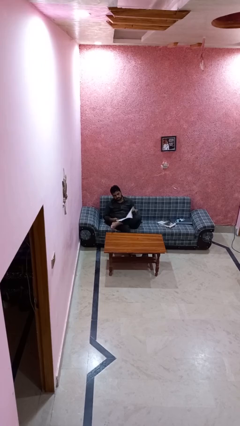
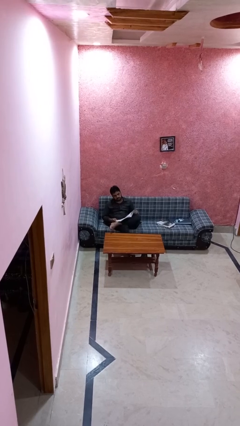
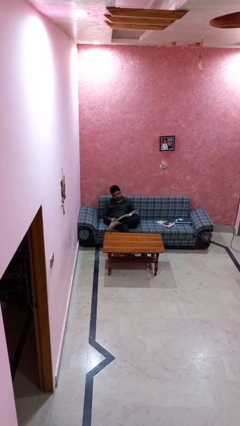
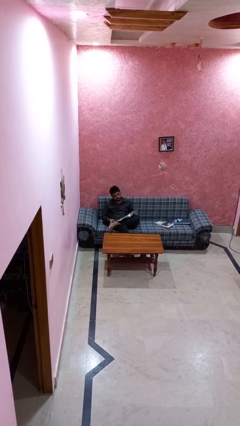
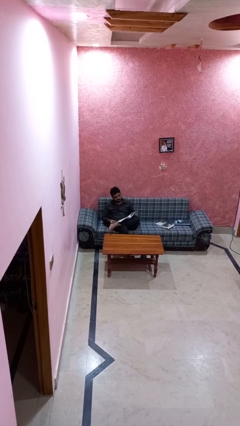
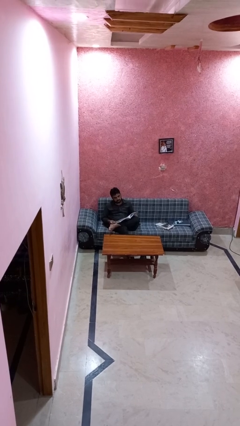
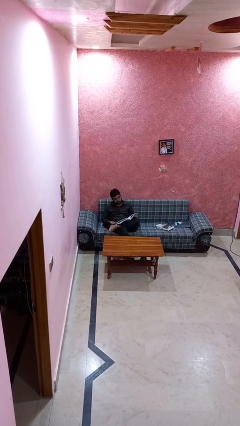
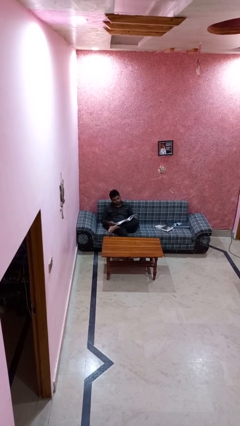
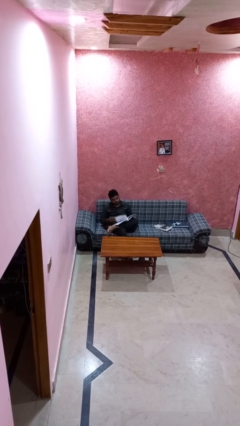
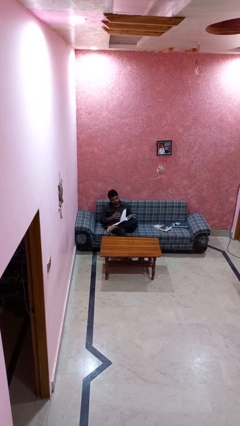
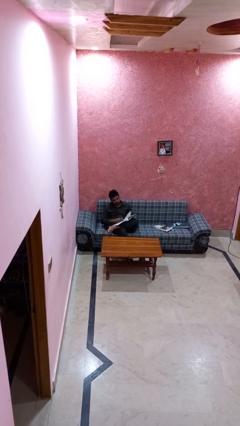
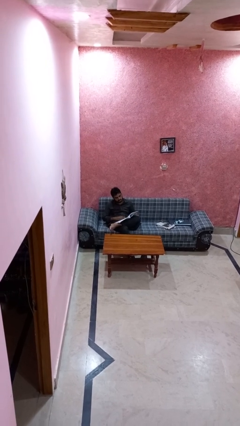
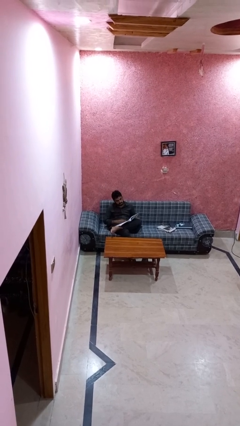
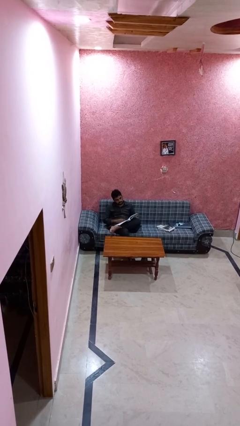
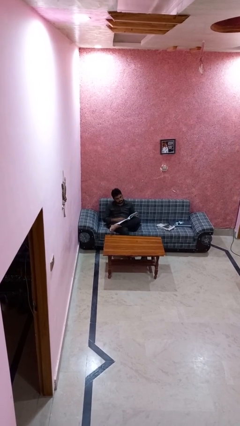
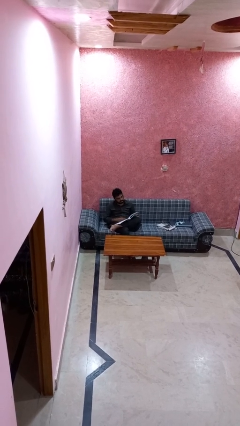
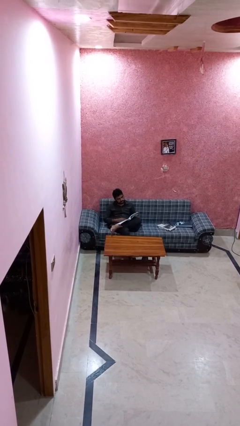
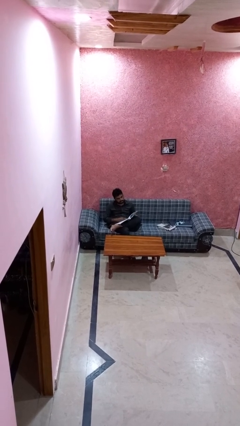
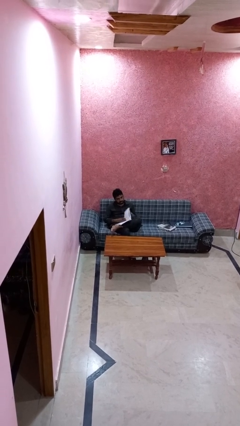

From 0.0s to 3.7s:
person reads magazine

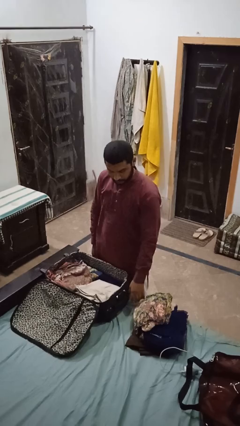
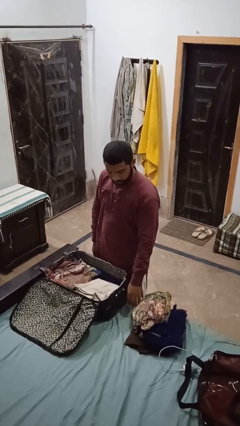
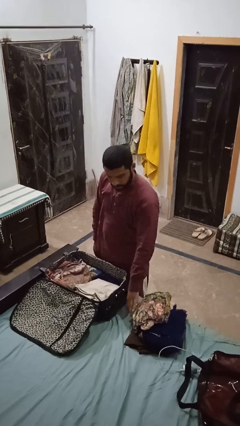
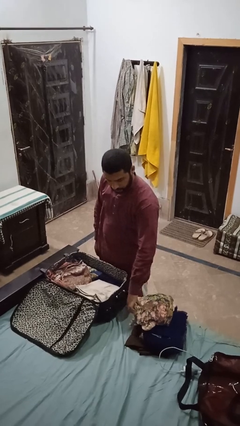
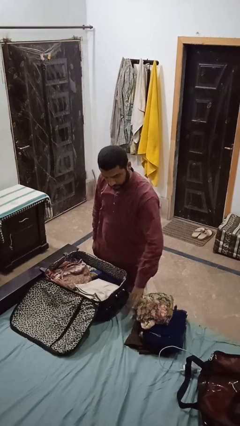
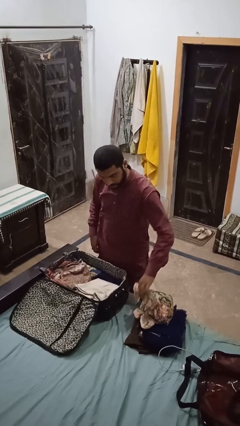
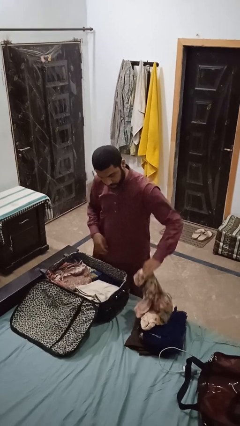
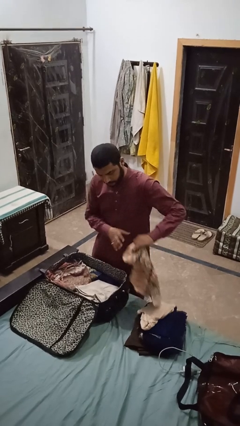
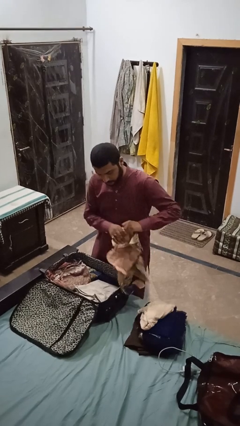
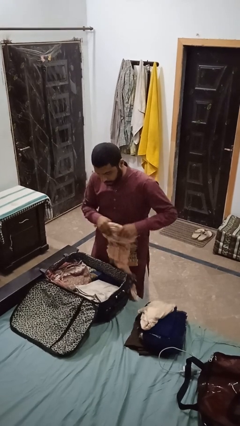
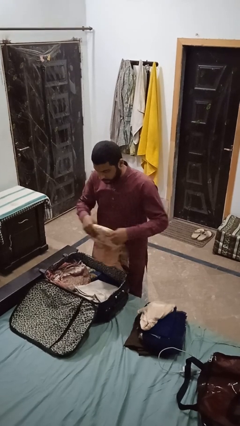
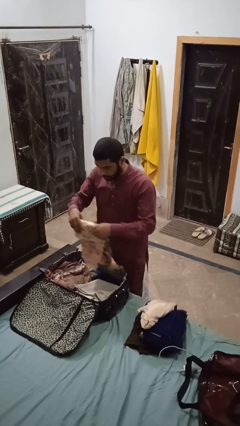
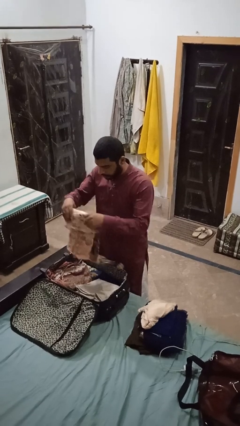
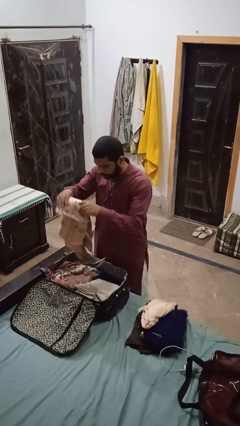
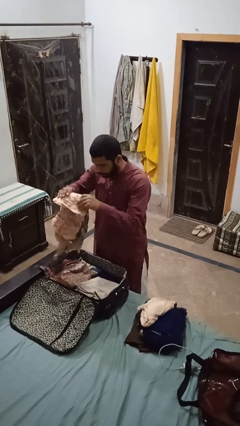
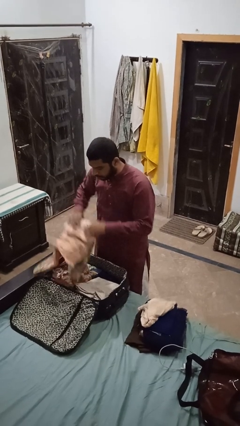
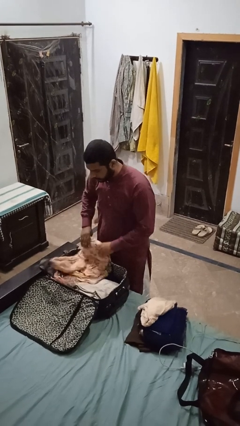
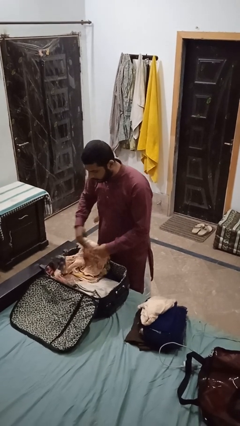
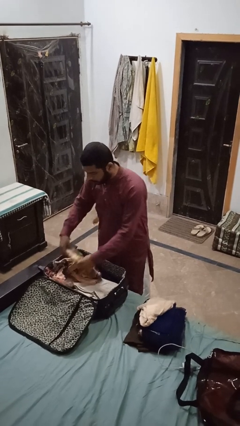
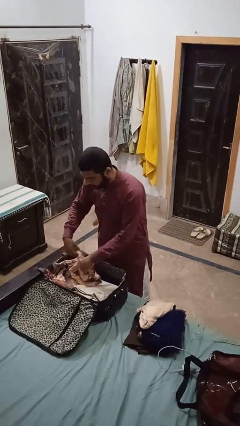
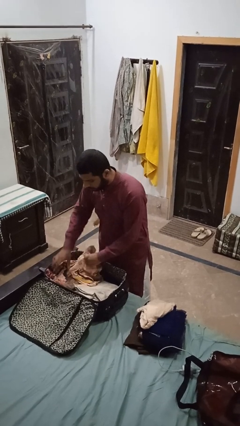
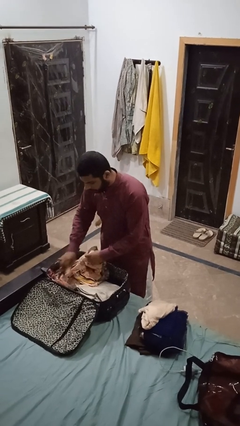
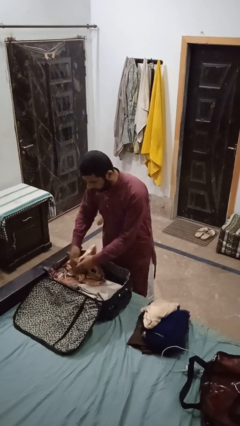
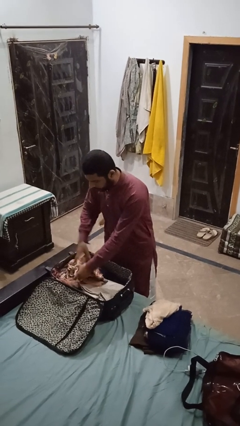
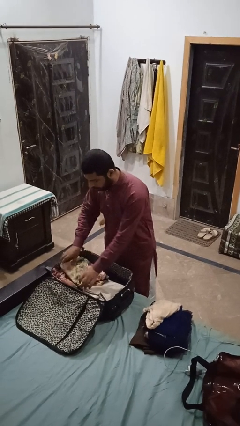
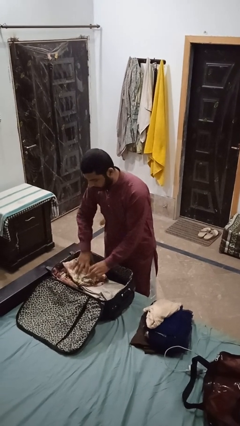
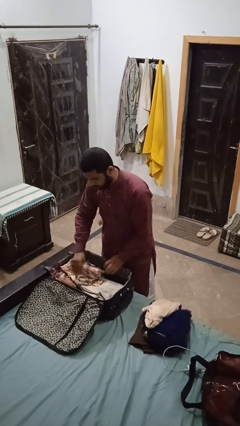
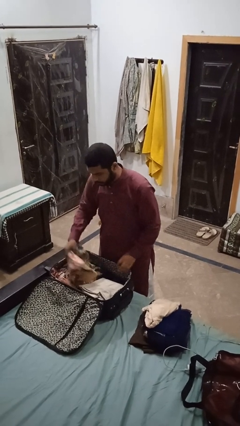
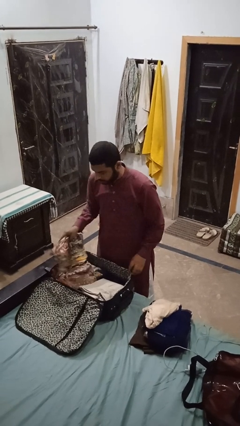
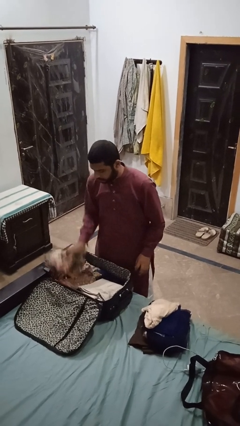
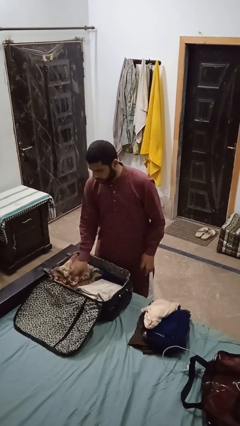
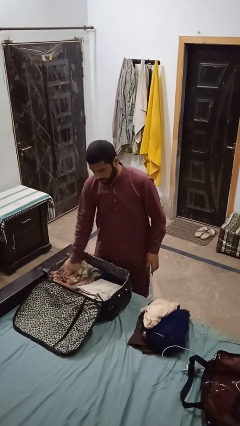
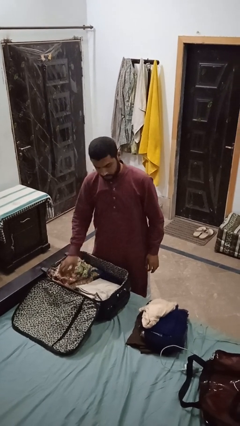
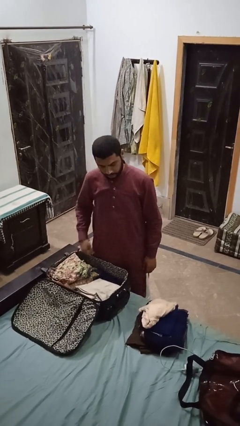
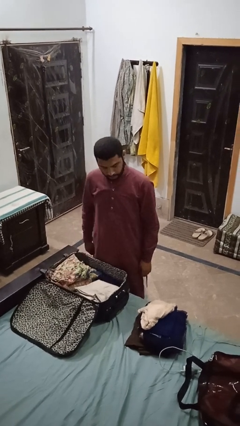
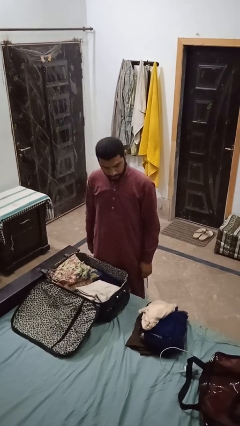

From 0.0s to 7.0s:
person loads clothes into suitcase

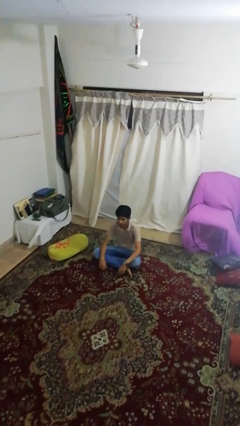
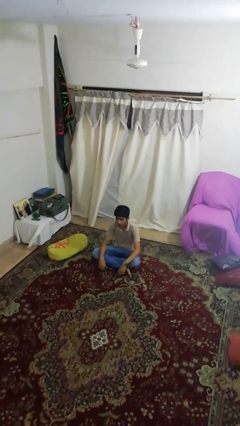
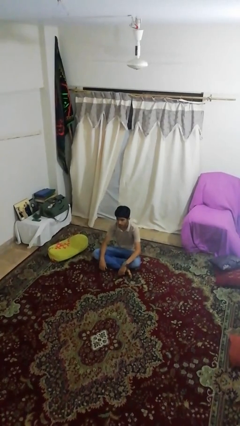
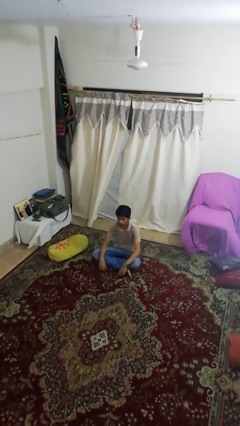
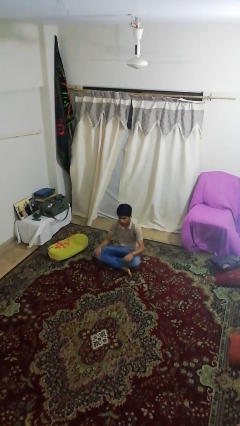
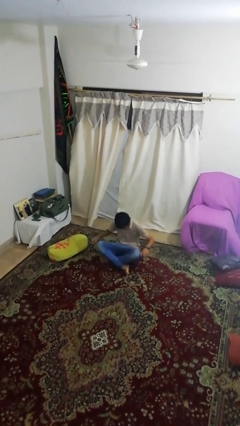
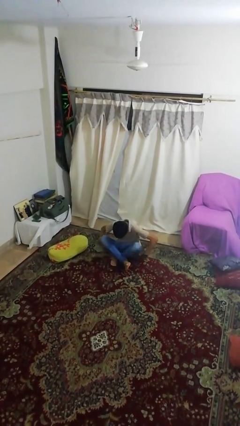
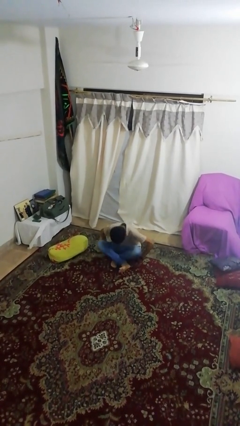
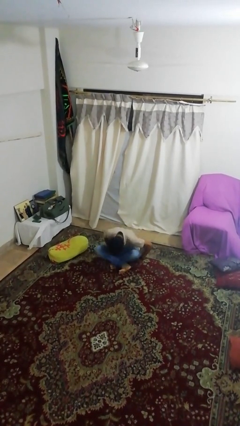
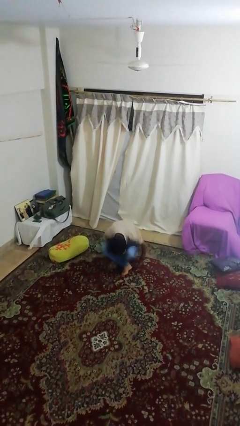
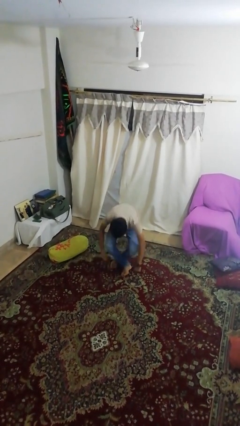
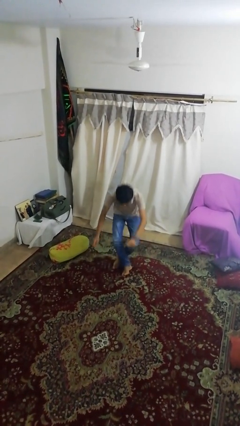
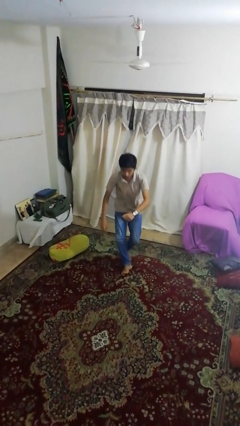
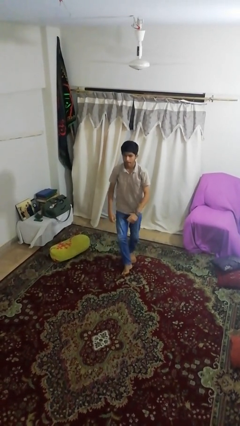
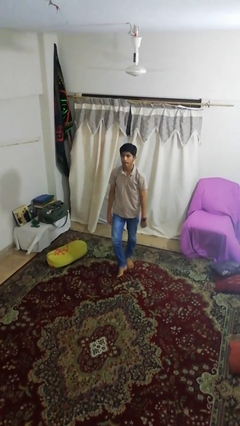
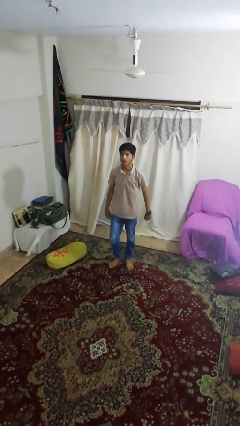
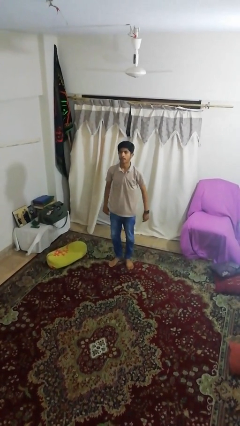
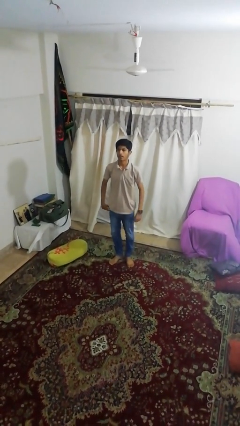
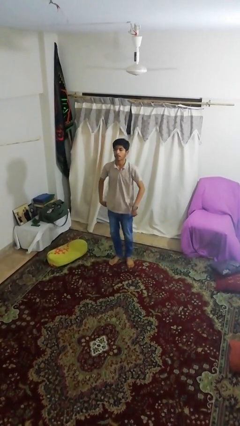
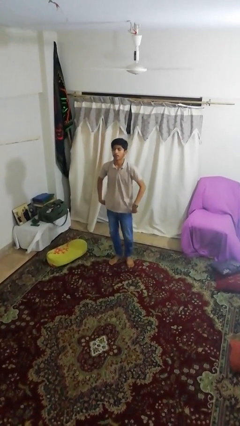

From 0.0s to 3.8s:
person stands up from floor

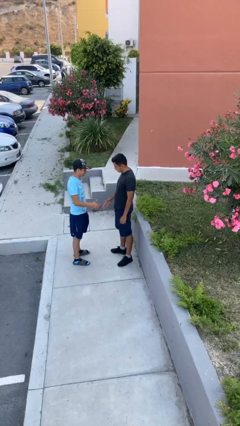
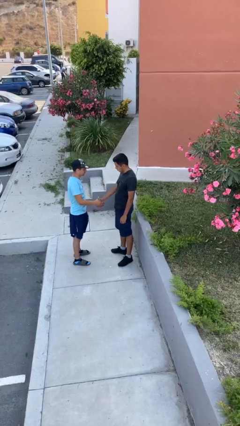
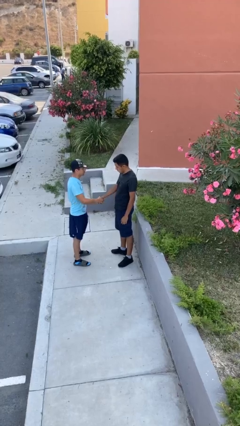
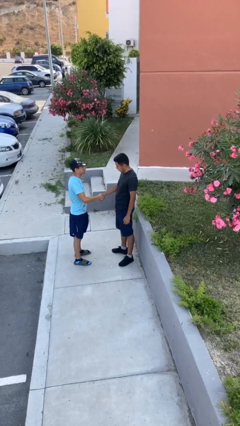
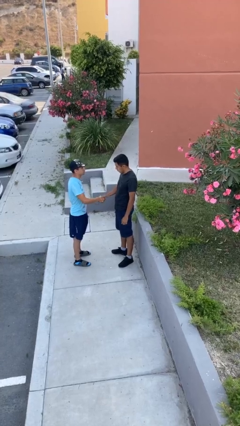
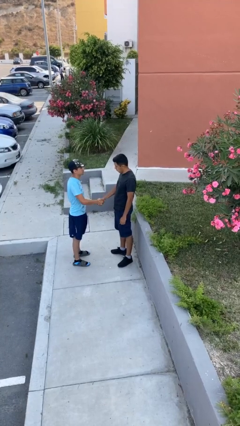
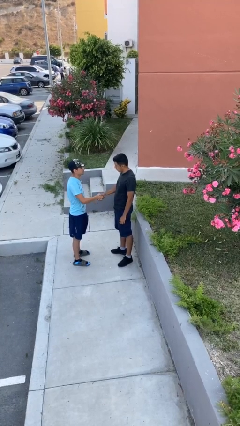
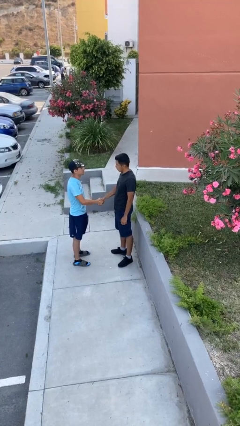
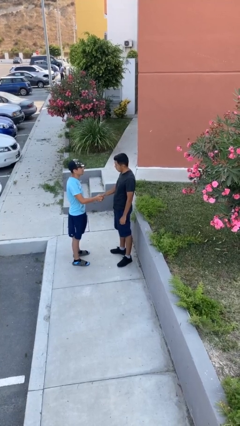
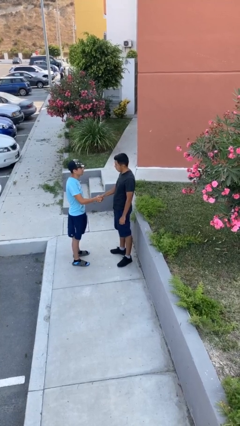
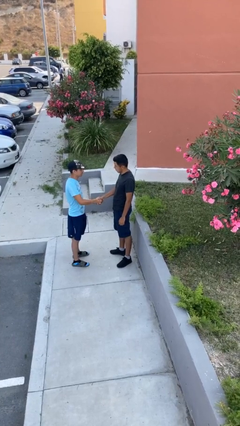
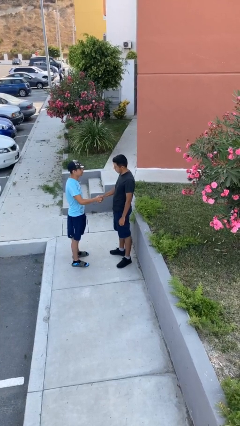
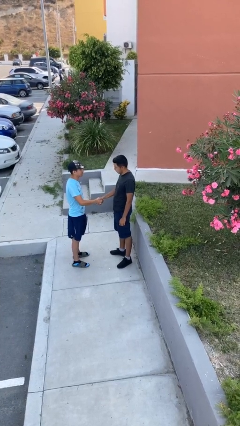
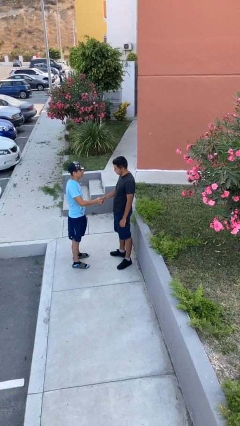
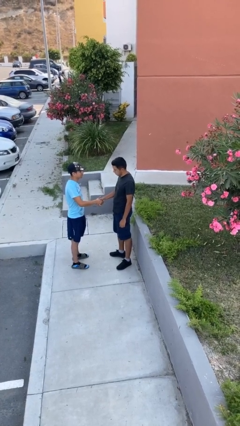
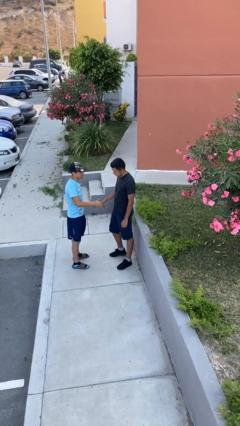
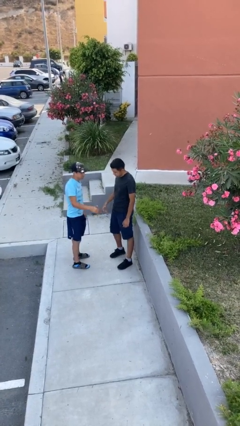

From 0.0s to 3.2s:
person shakes hand
